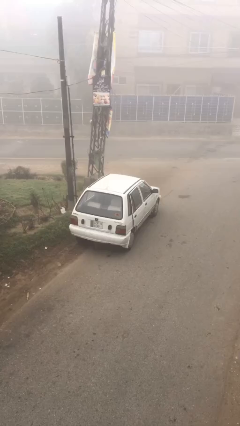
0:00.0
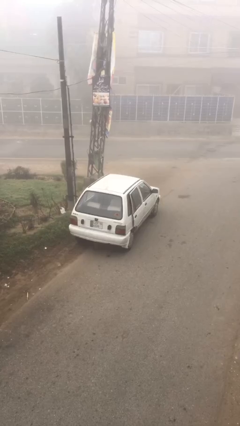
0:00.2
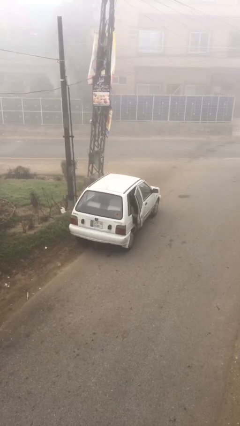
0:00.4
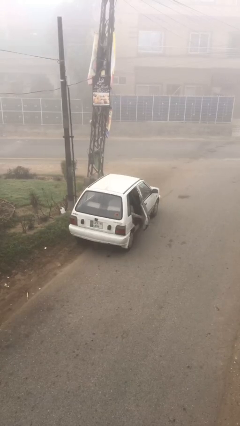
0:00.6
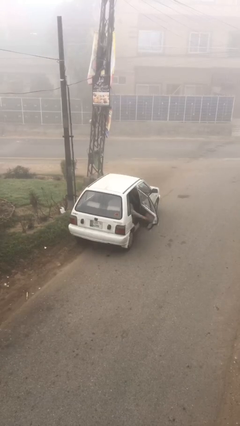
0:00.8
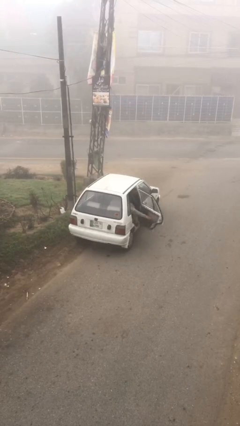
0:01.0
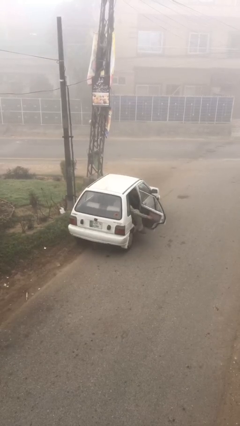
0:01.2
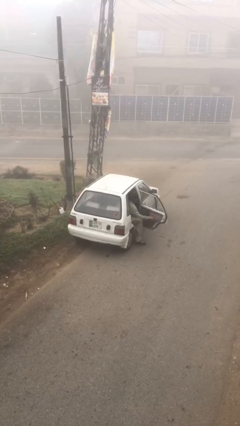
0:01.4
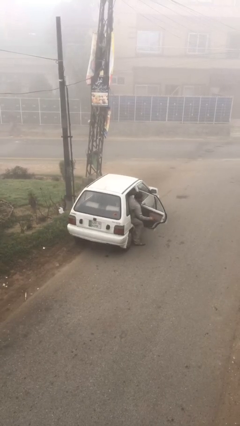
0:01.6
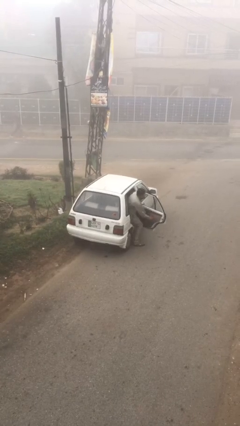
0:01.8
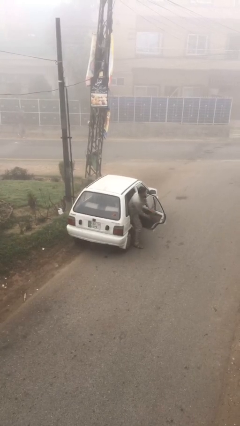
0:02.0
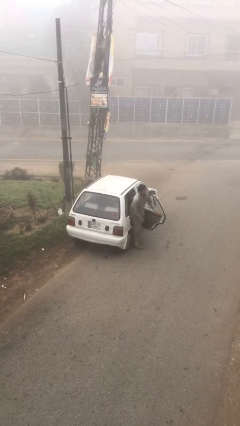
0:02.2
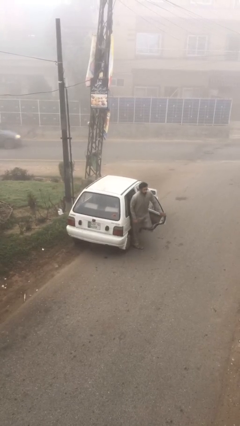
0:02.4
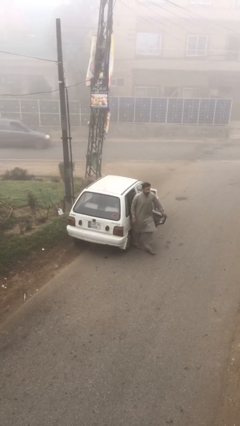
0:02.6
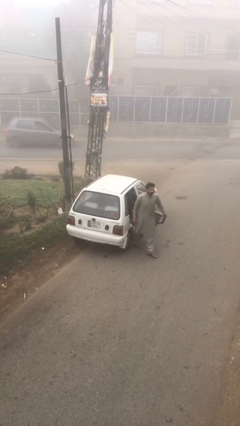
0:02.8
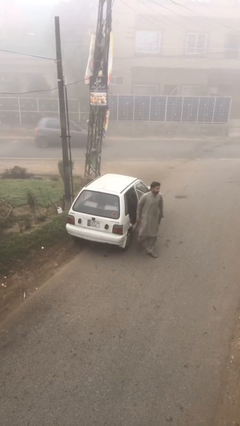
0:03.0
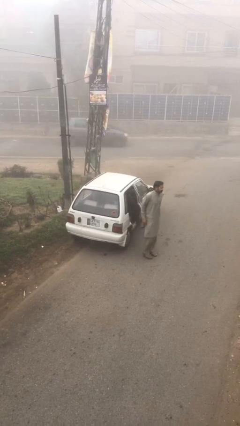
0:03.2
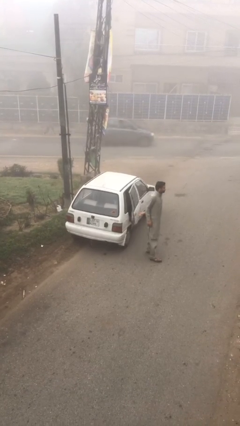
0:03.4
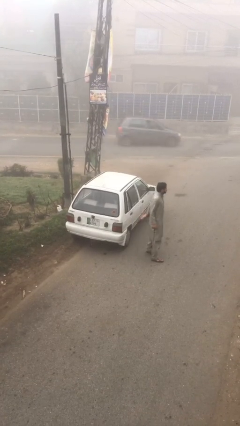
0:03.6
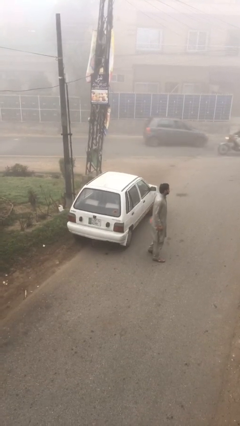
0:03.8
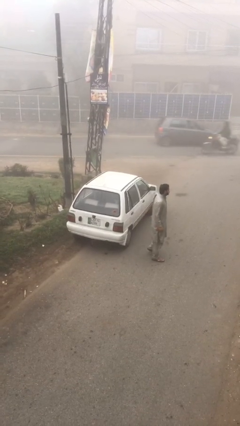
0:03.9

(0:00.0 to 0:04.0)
car drops off person

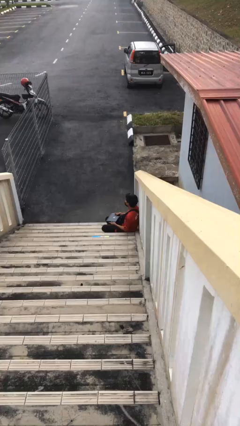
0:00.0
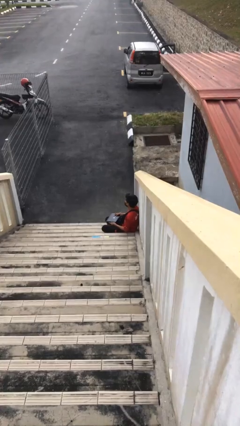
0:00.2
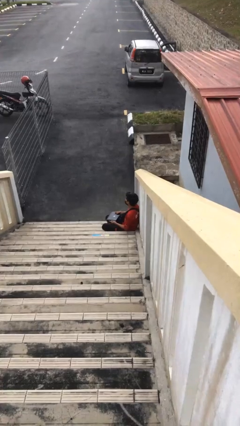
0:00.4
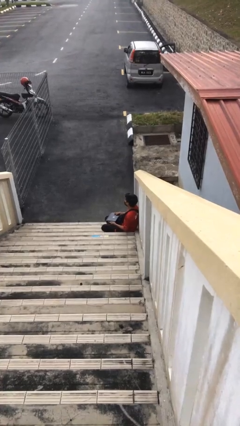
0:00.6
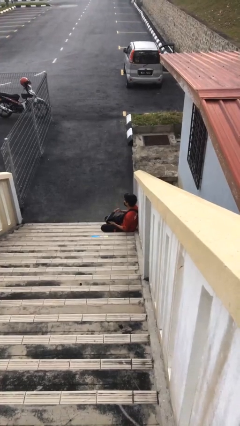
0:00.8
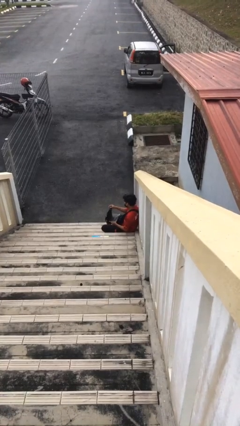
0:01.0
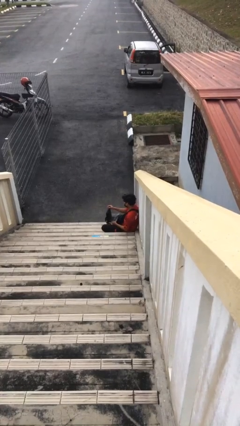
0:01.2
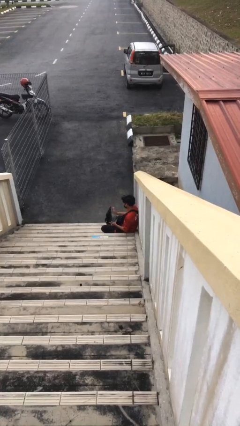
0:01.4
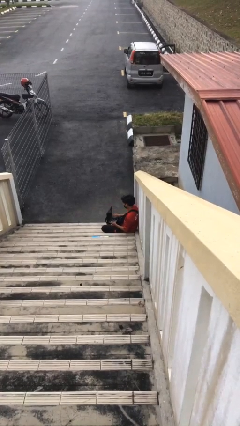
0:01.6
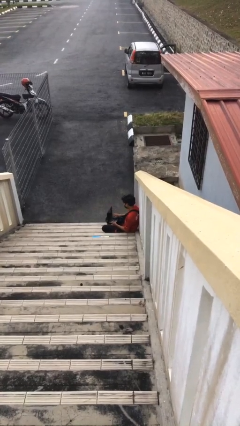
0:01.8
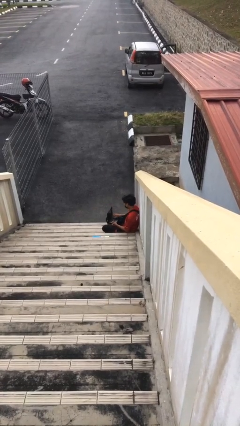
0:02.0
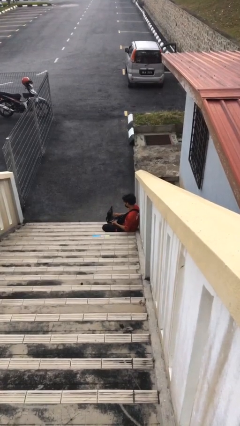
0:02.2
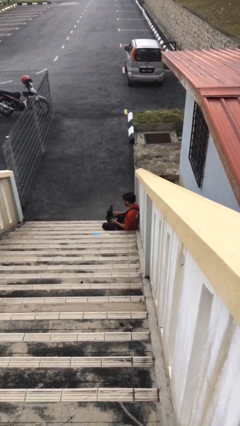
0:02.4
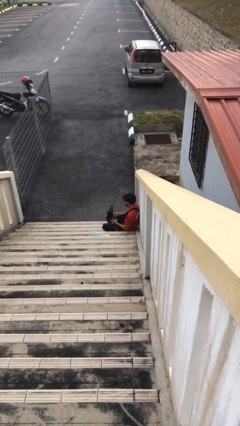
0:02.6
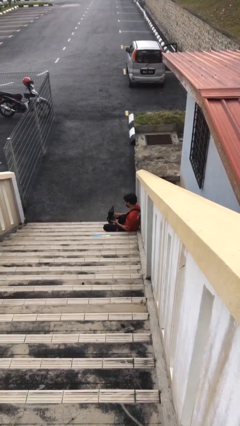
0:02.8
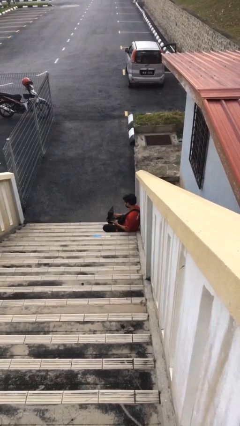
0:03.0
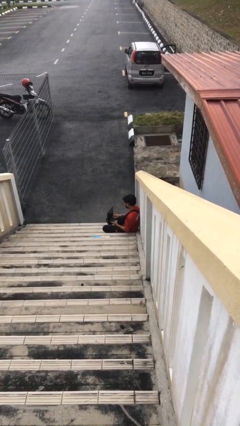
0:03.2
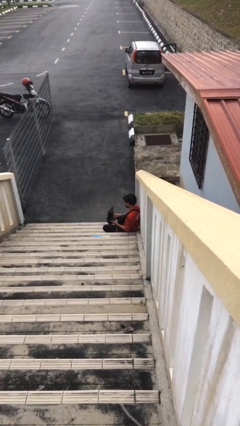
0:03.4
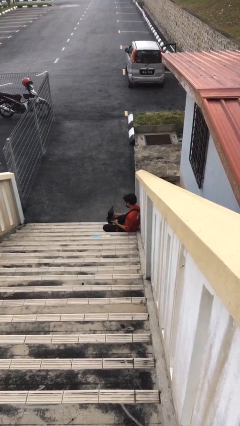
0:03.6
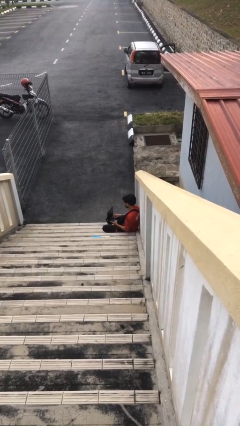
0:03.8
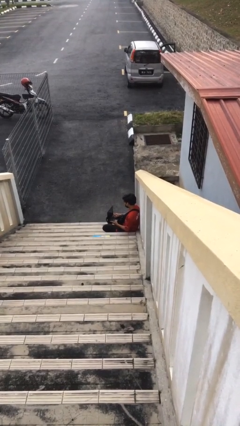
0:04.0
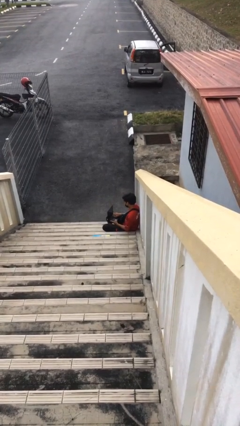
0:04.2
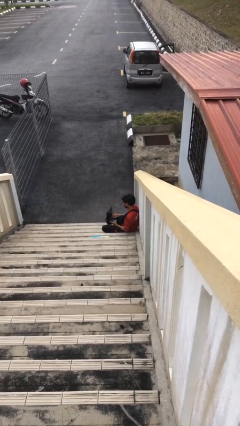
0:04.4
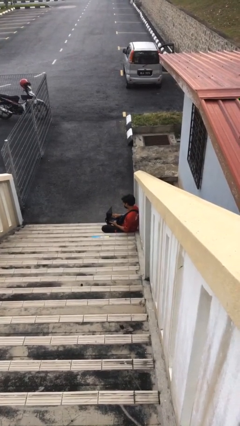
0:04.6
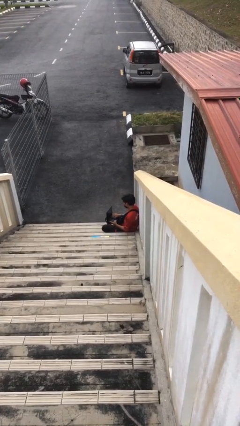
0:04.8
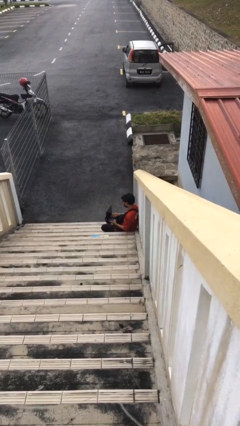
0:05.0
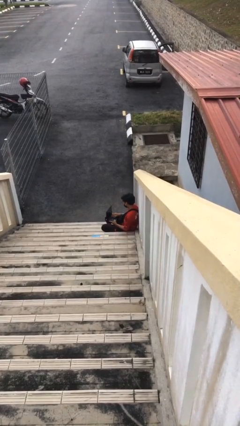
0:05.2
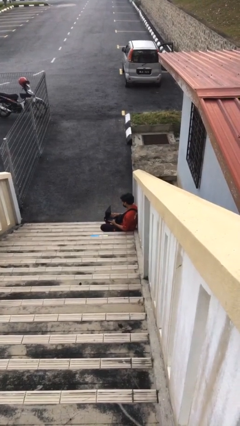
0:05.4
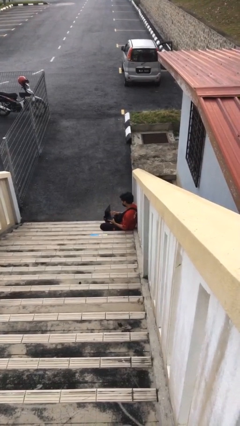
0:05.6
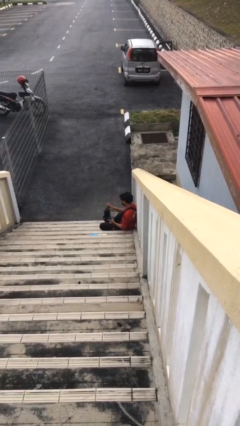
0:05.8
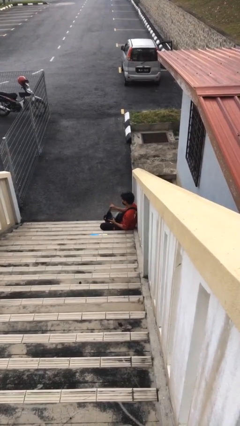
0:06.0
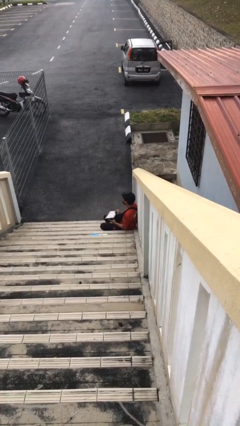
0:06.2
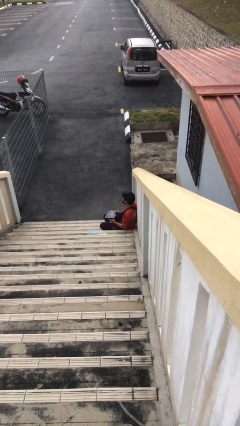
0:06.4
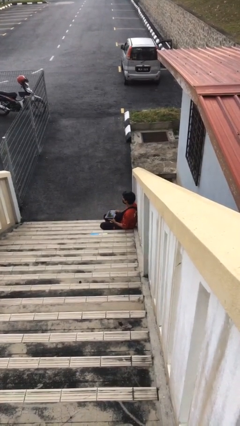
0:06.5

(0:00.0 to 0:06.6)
person interacts with laptop

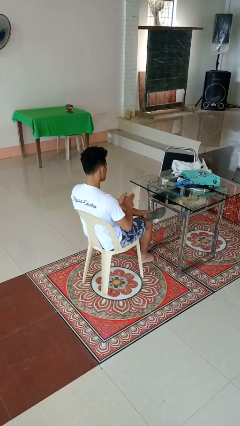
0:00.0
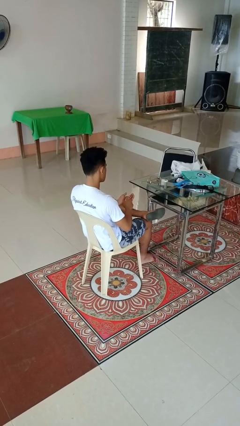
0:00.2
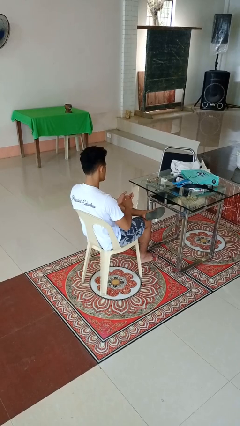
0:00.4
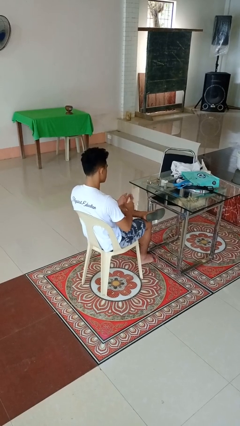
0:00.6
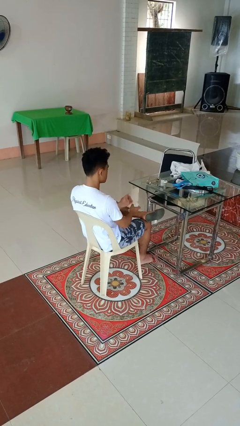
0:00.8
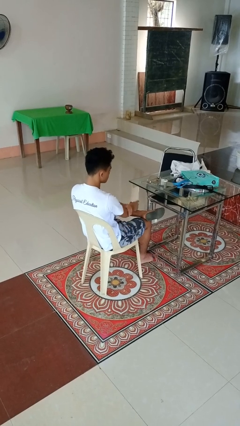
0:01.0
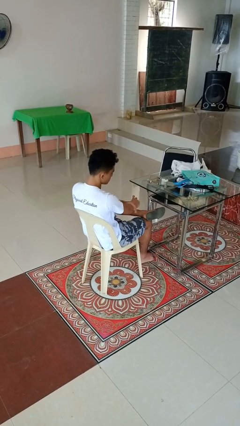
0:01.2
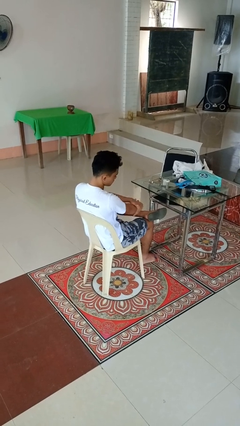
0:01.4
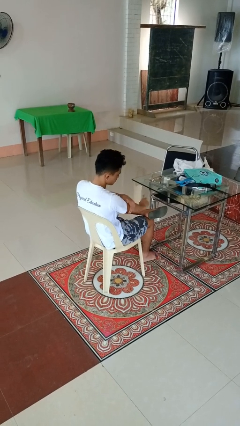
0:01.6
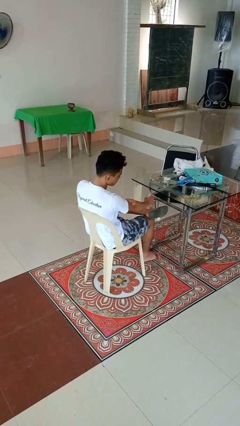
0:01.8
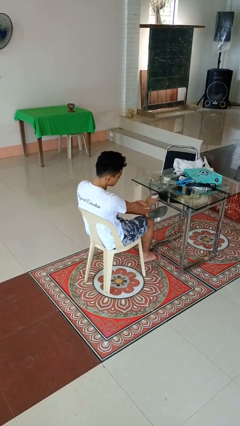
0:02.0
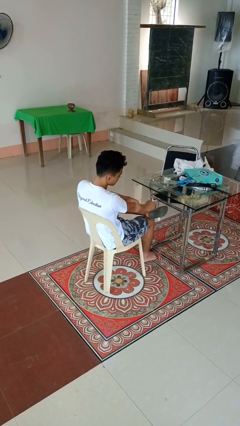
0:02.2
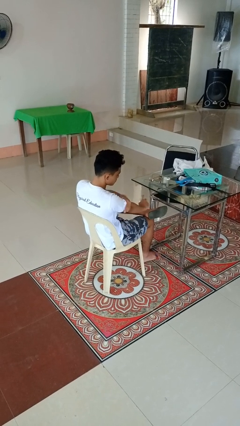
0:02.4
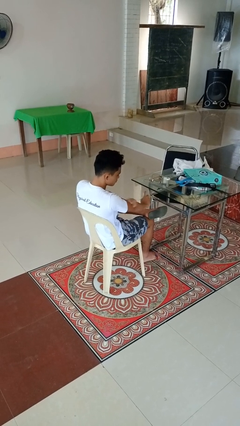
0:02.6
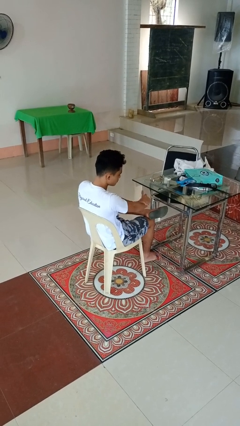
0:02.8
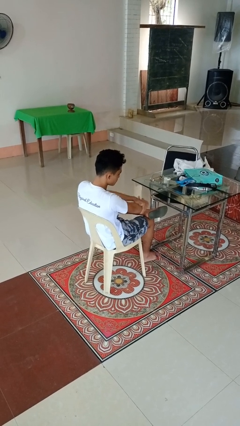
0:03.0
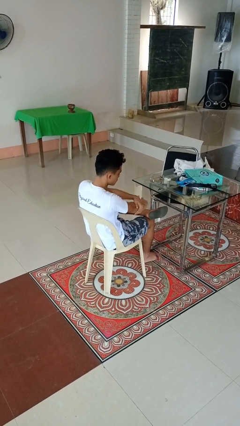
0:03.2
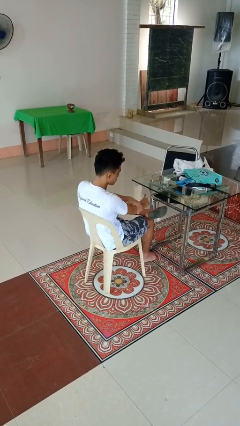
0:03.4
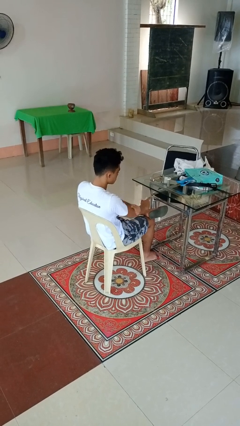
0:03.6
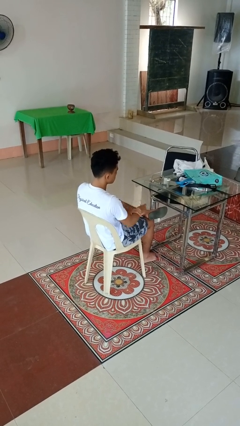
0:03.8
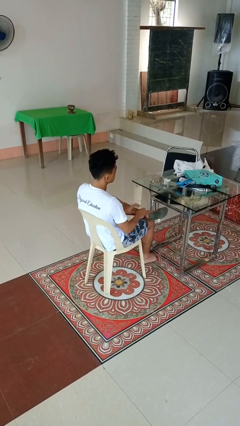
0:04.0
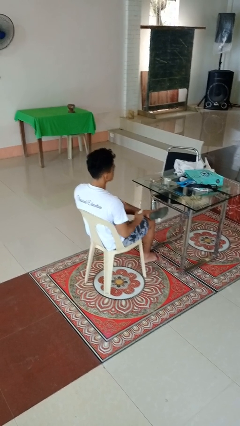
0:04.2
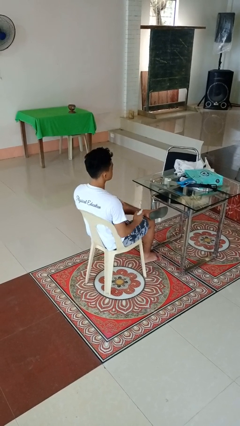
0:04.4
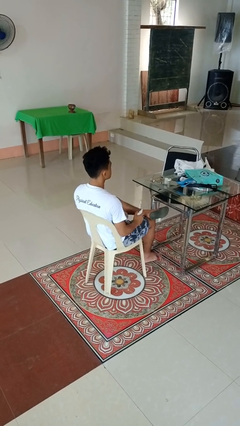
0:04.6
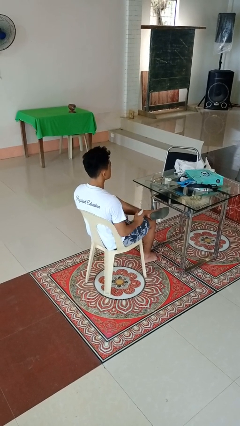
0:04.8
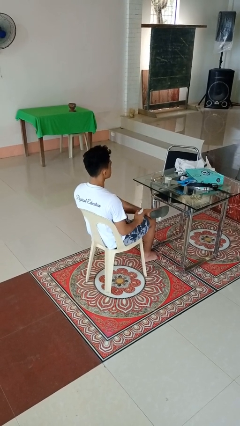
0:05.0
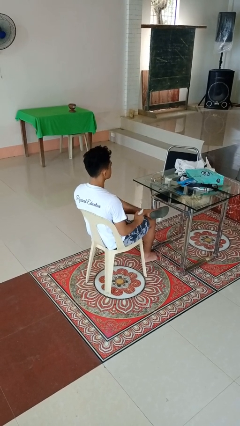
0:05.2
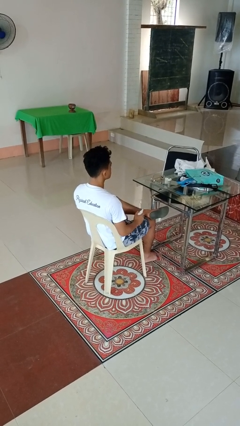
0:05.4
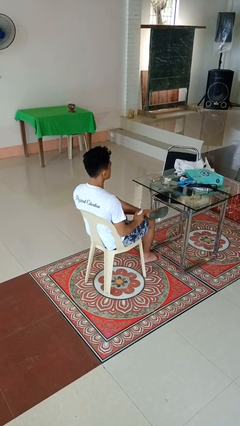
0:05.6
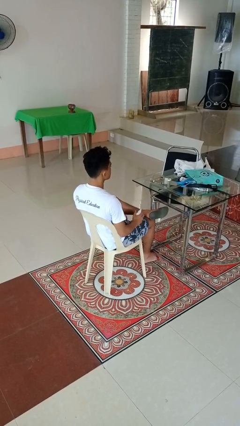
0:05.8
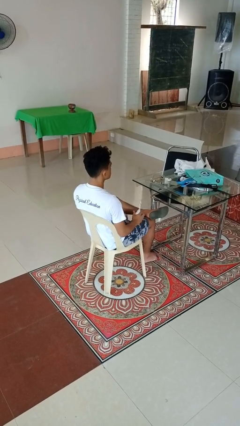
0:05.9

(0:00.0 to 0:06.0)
person applies sunscreen

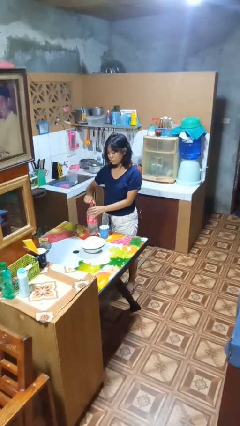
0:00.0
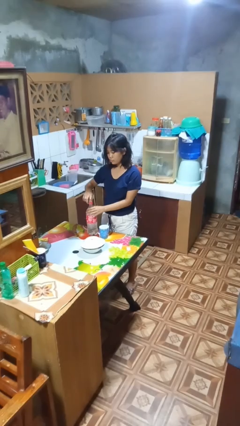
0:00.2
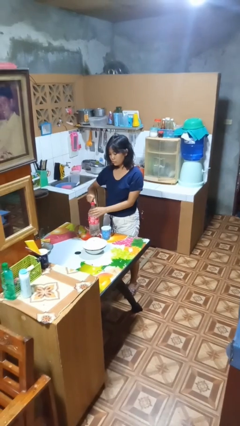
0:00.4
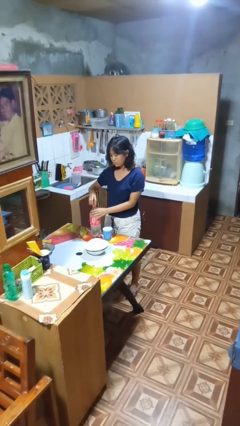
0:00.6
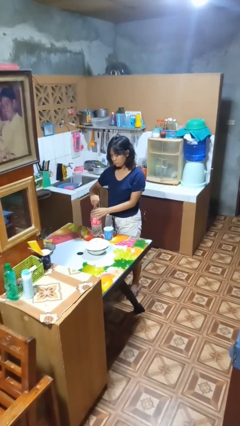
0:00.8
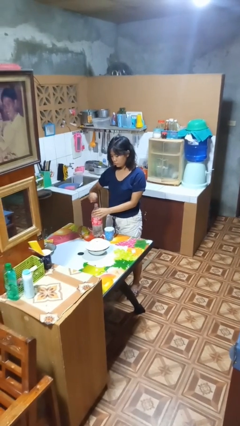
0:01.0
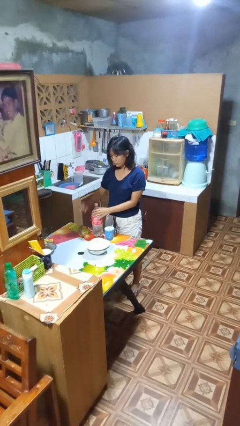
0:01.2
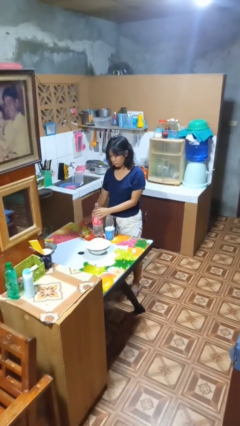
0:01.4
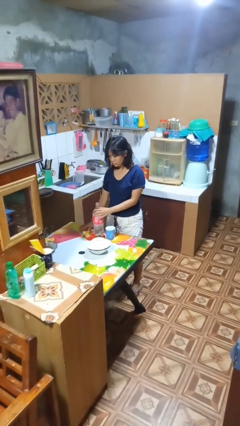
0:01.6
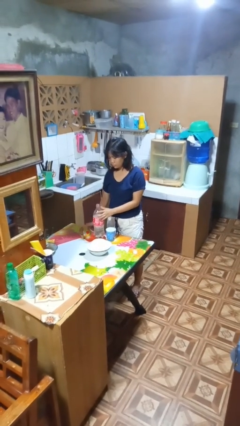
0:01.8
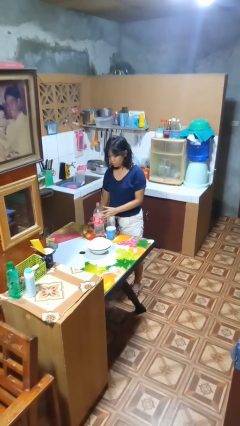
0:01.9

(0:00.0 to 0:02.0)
person unscrews lid from bottle
